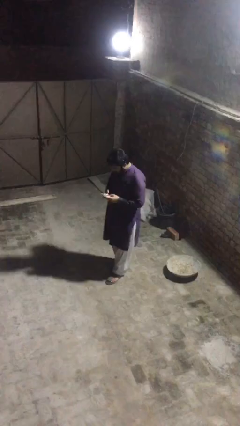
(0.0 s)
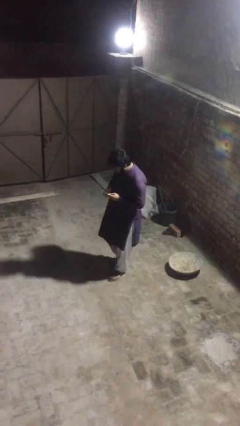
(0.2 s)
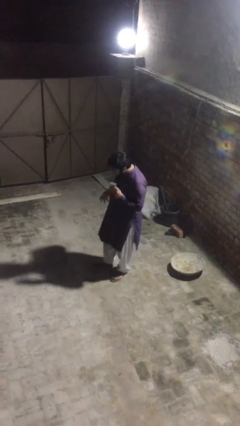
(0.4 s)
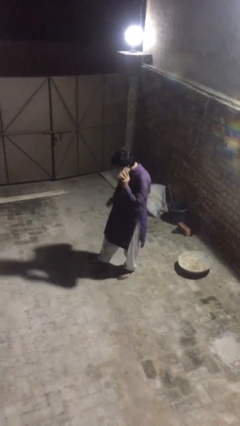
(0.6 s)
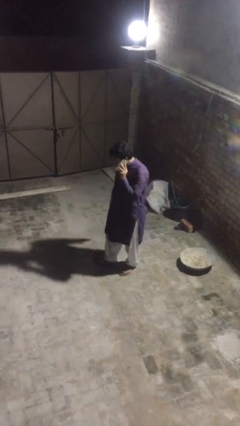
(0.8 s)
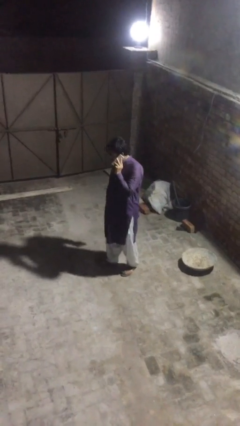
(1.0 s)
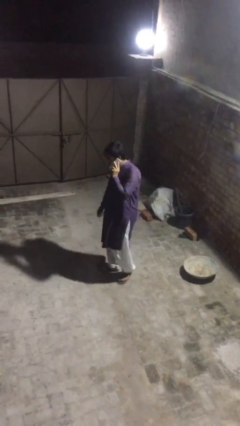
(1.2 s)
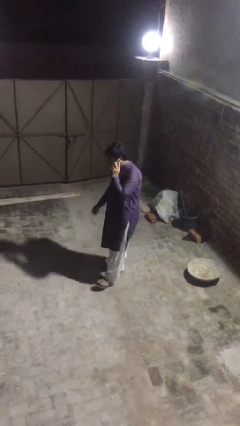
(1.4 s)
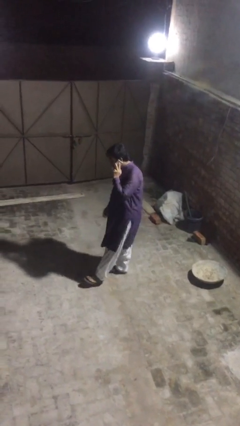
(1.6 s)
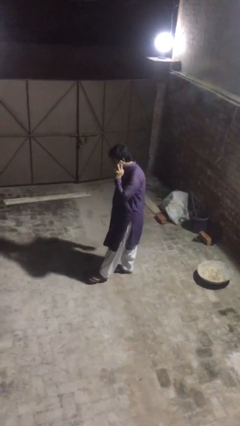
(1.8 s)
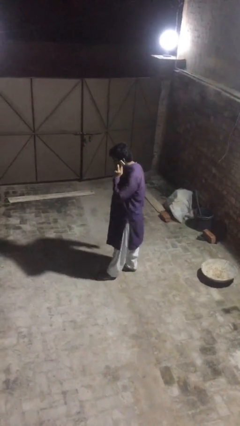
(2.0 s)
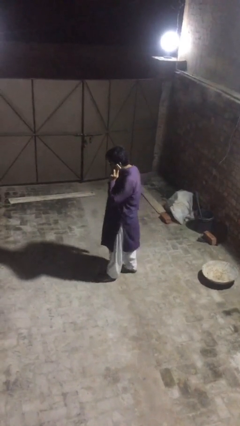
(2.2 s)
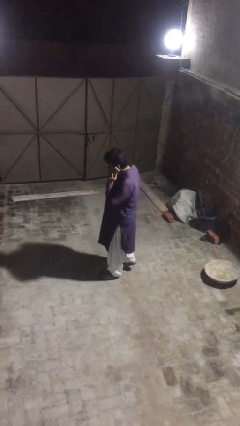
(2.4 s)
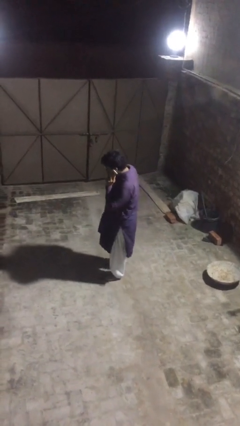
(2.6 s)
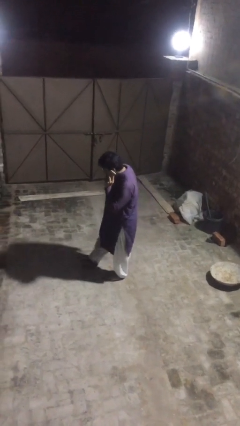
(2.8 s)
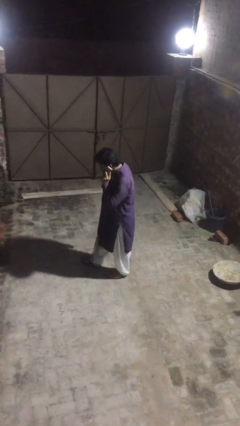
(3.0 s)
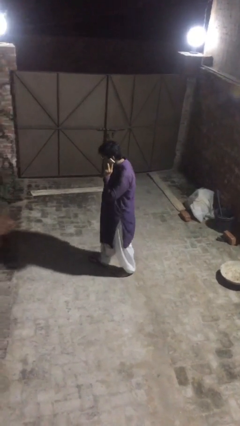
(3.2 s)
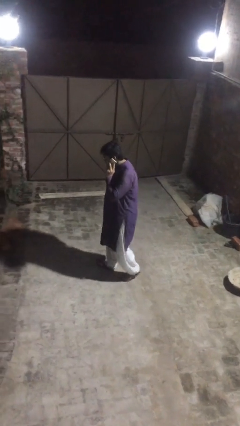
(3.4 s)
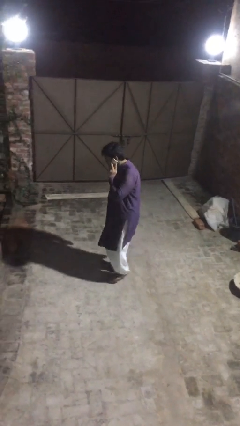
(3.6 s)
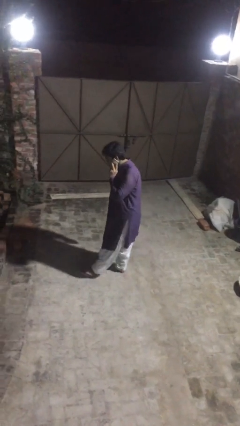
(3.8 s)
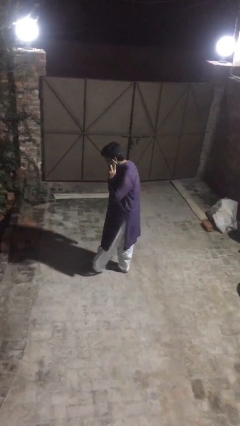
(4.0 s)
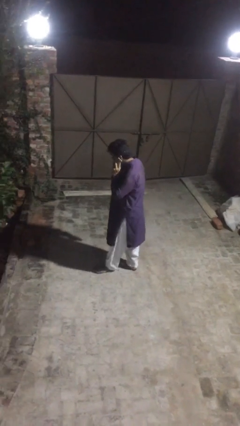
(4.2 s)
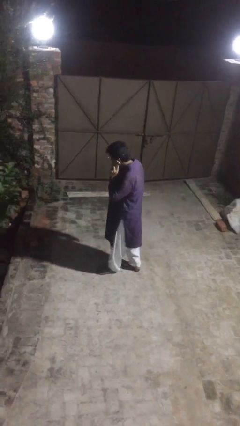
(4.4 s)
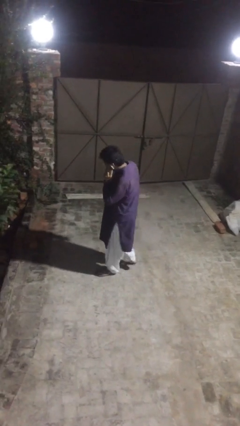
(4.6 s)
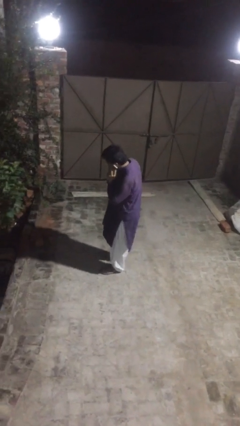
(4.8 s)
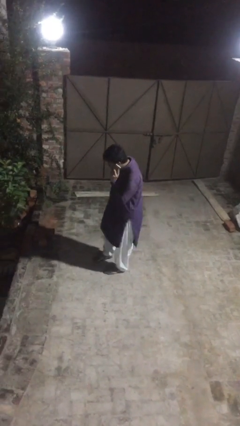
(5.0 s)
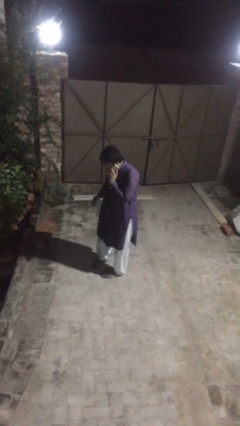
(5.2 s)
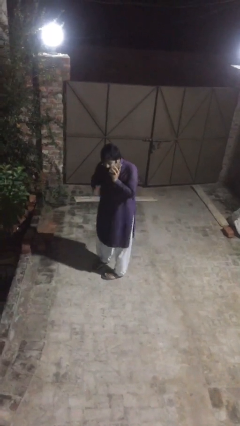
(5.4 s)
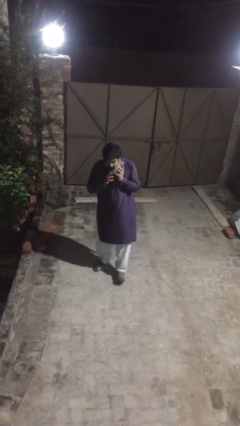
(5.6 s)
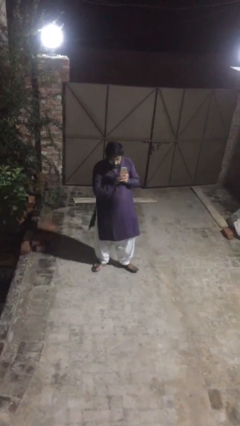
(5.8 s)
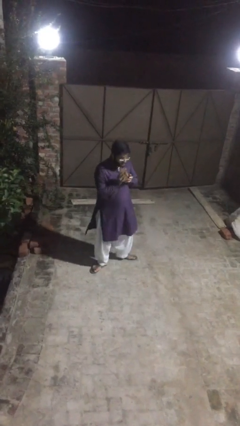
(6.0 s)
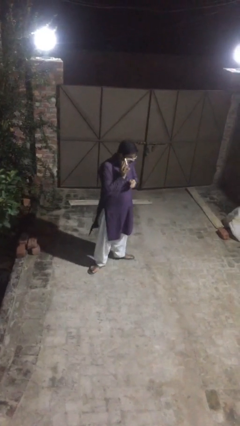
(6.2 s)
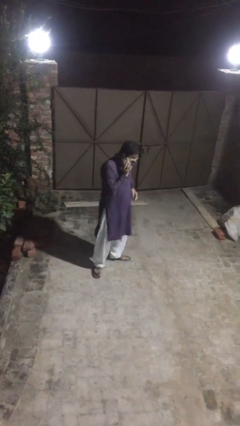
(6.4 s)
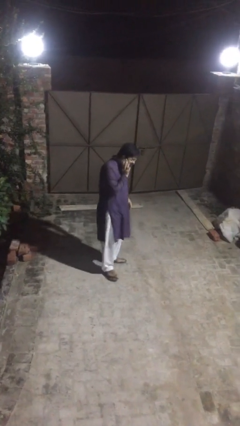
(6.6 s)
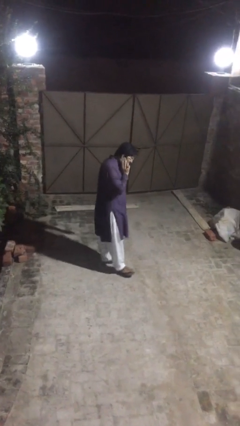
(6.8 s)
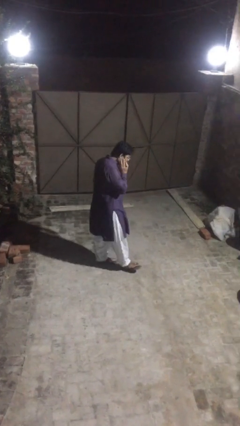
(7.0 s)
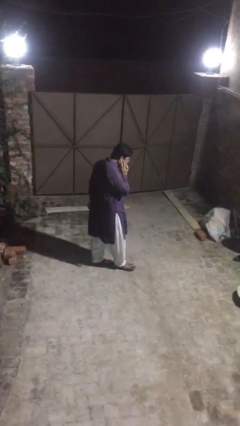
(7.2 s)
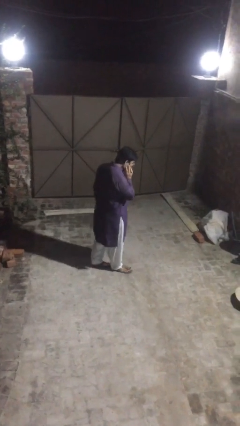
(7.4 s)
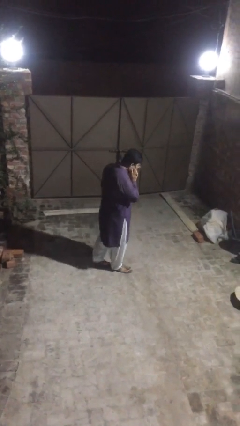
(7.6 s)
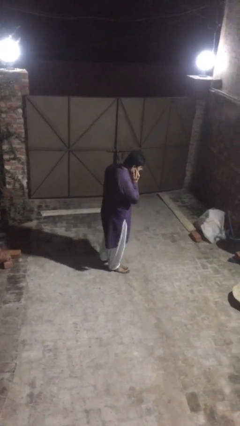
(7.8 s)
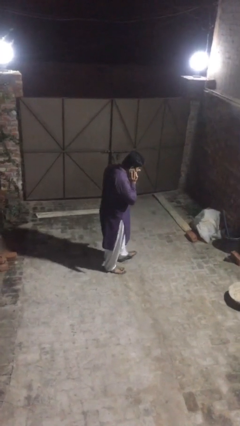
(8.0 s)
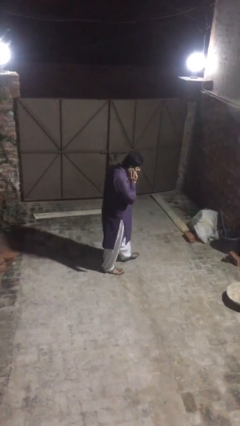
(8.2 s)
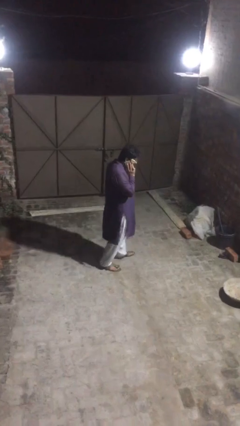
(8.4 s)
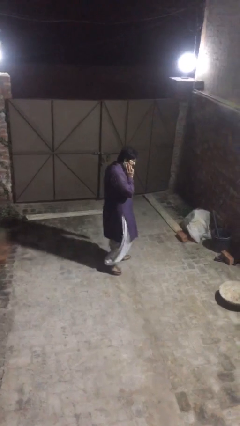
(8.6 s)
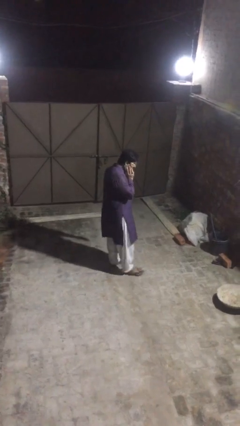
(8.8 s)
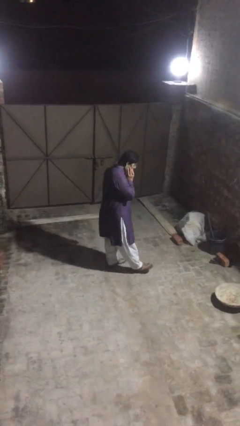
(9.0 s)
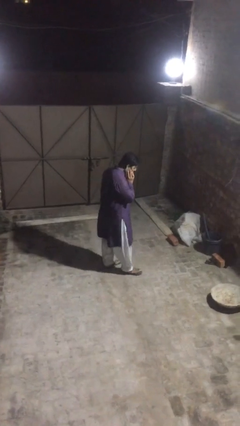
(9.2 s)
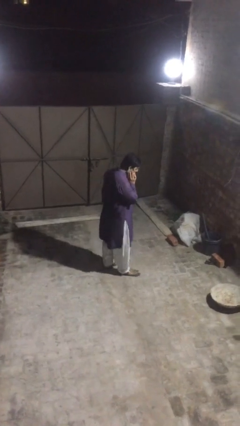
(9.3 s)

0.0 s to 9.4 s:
person talks on phone

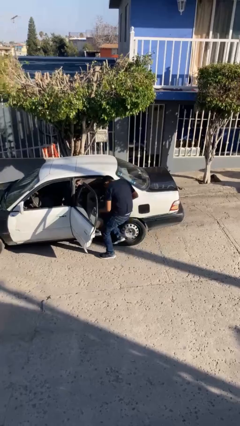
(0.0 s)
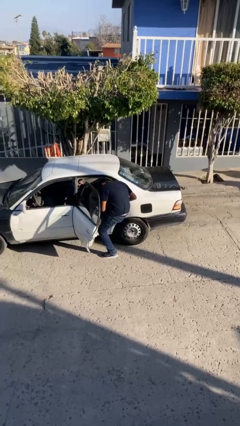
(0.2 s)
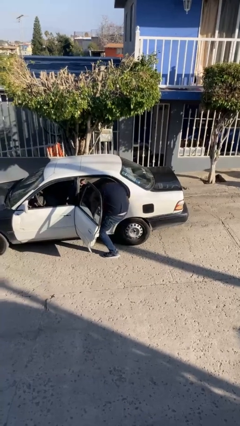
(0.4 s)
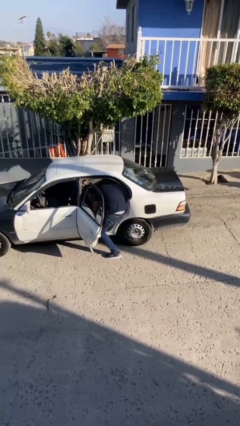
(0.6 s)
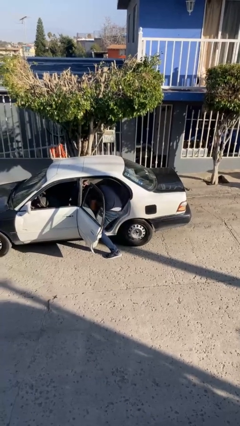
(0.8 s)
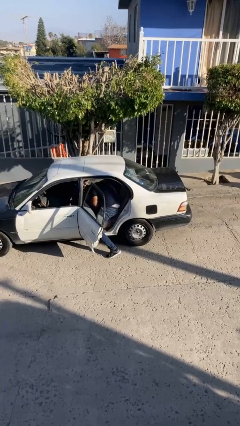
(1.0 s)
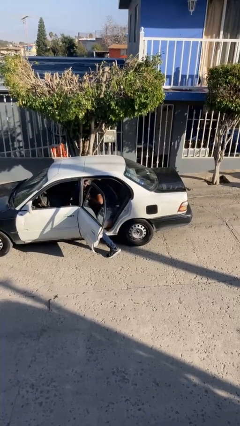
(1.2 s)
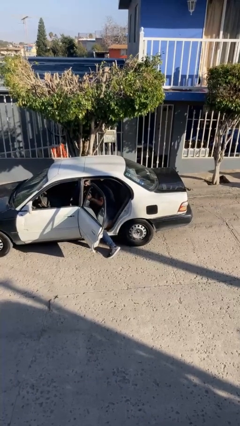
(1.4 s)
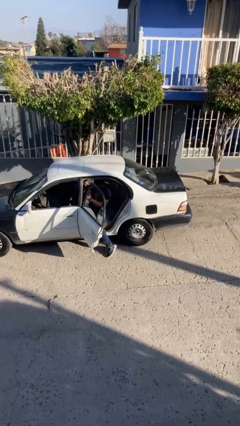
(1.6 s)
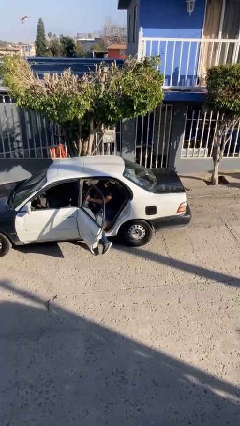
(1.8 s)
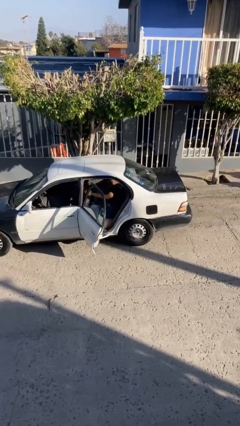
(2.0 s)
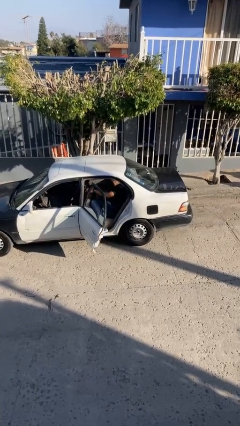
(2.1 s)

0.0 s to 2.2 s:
person enters car

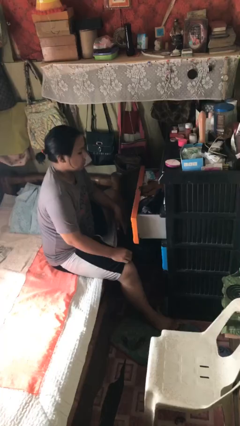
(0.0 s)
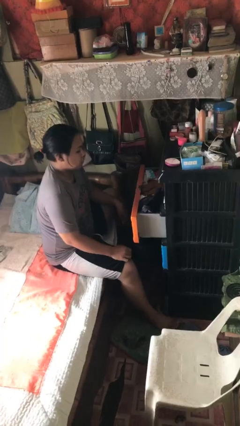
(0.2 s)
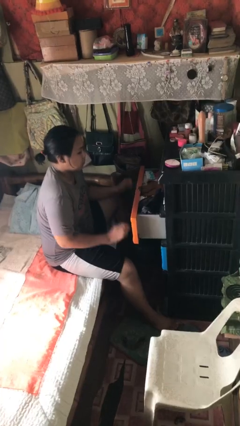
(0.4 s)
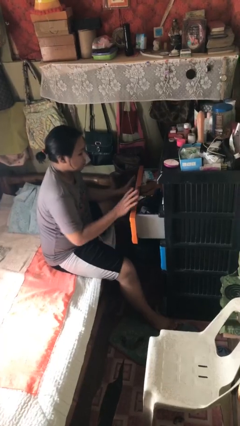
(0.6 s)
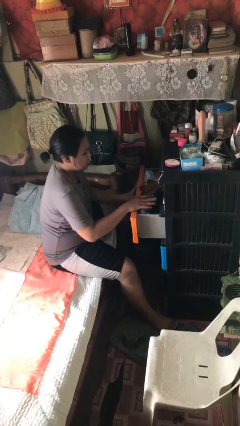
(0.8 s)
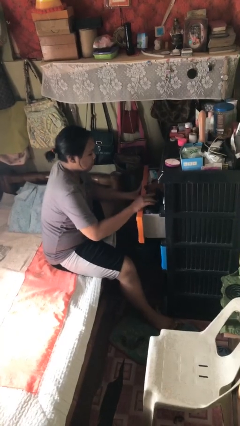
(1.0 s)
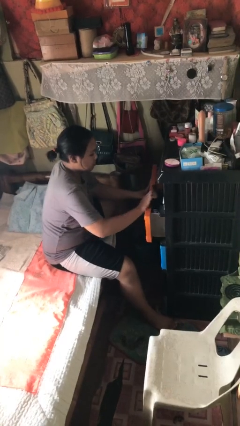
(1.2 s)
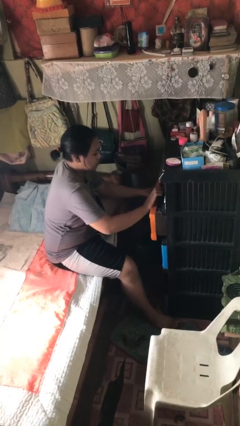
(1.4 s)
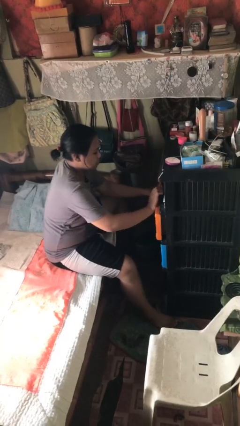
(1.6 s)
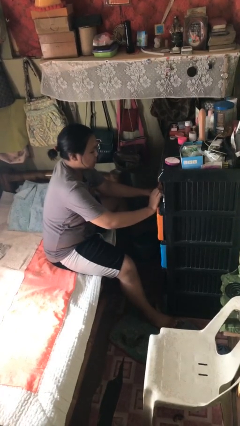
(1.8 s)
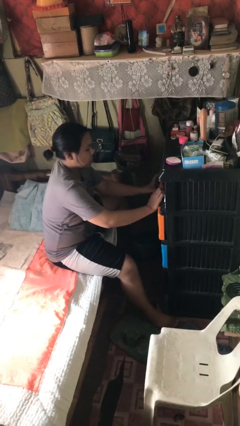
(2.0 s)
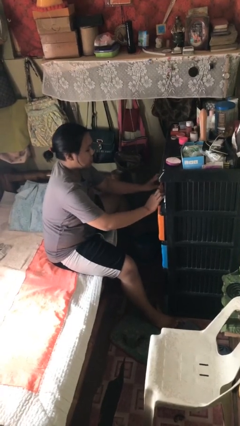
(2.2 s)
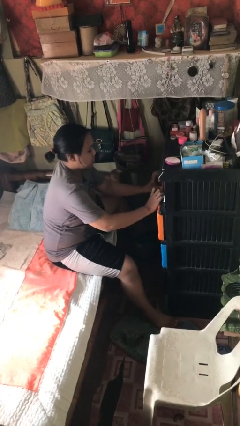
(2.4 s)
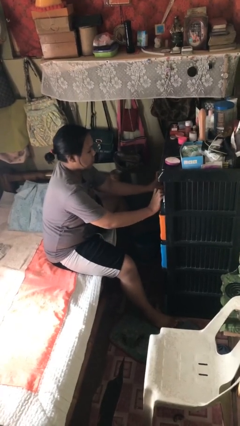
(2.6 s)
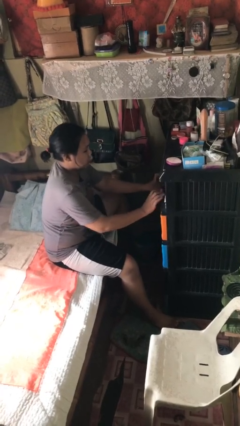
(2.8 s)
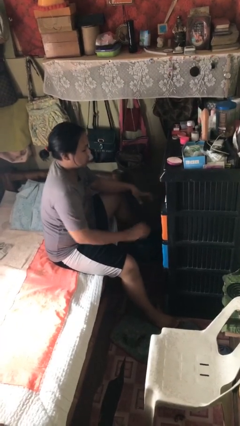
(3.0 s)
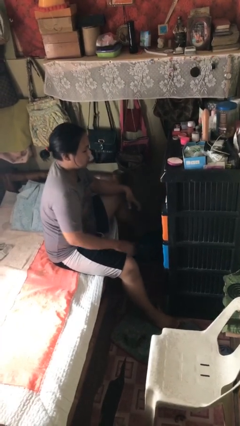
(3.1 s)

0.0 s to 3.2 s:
person closes dresser drawer

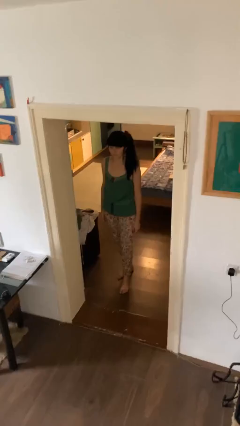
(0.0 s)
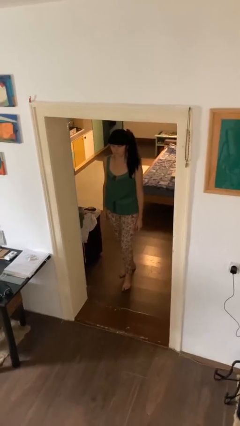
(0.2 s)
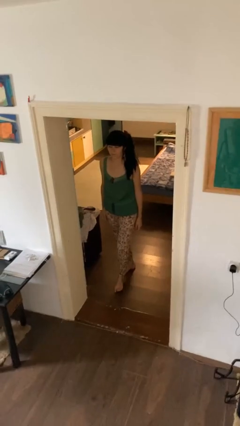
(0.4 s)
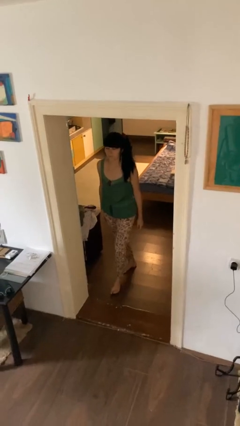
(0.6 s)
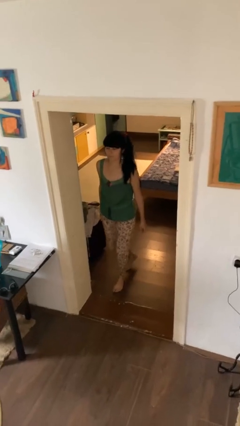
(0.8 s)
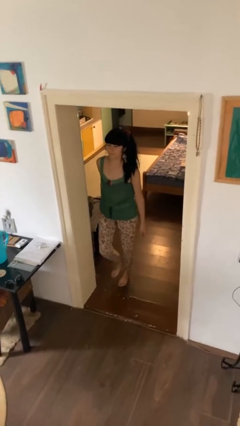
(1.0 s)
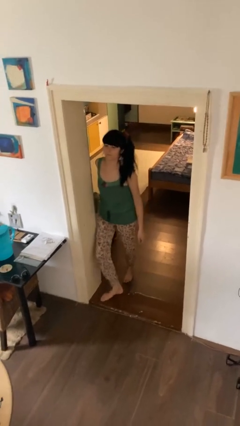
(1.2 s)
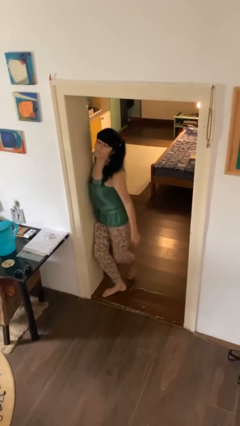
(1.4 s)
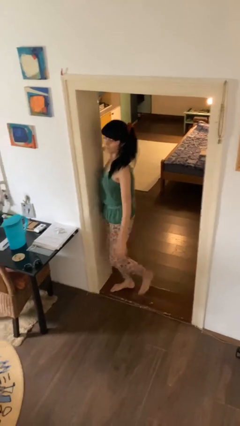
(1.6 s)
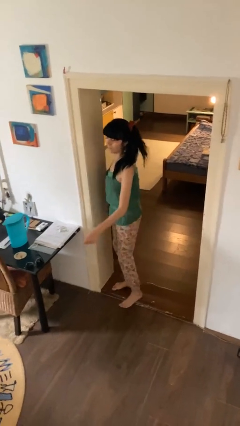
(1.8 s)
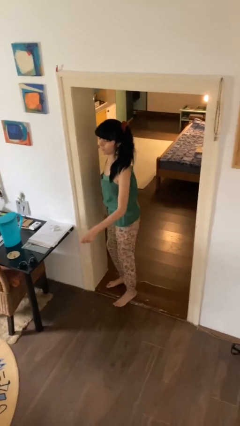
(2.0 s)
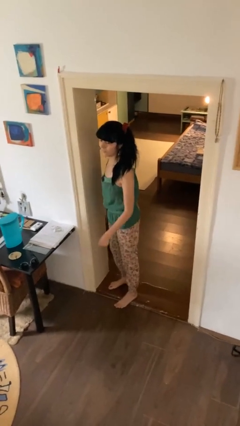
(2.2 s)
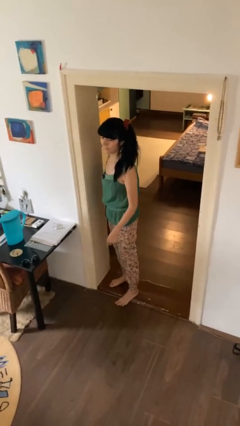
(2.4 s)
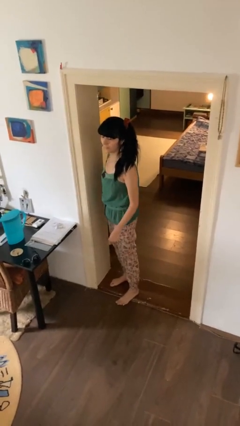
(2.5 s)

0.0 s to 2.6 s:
person bumps into wall

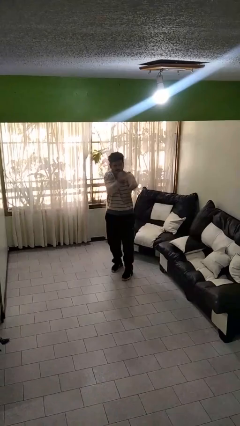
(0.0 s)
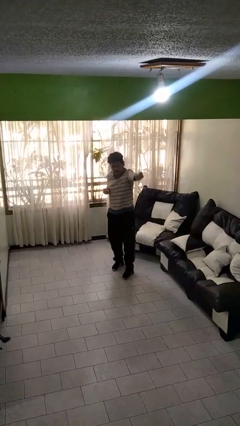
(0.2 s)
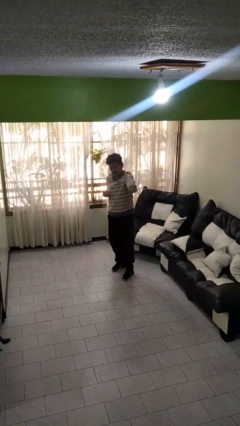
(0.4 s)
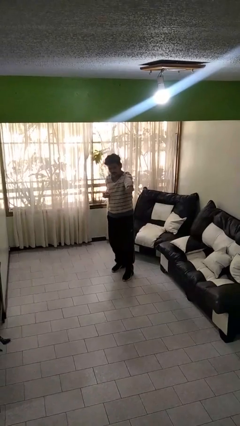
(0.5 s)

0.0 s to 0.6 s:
person karate chop
